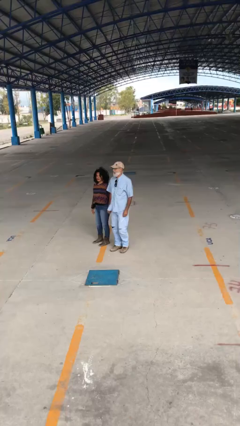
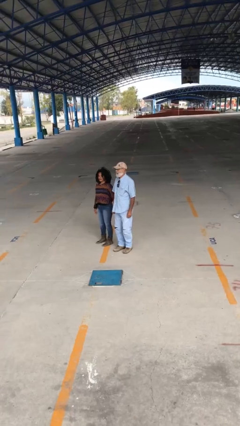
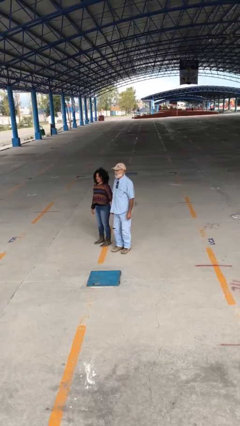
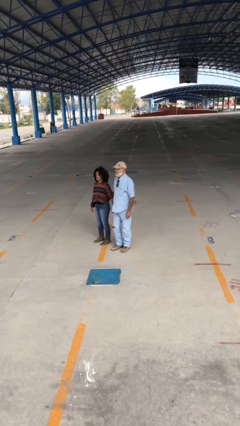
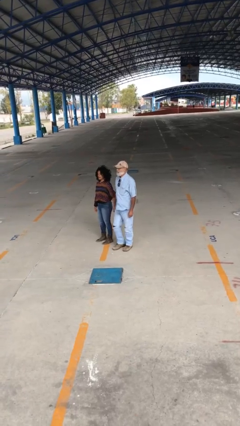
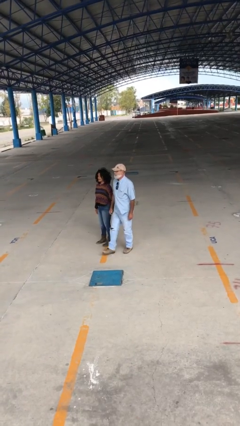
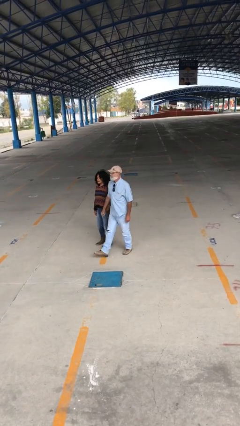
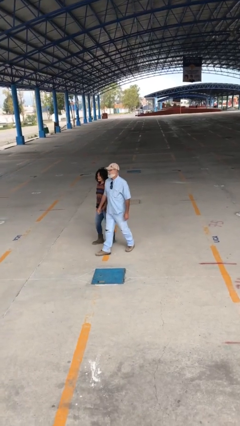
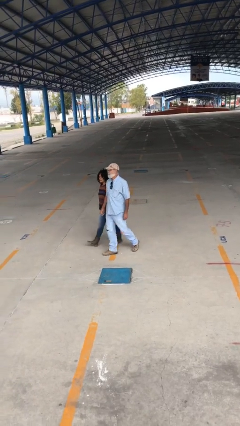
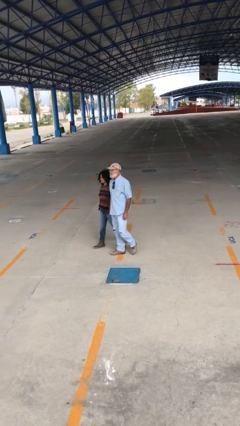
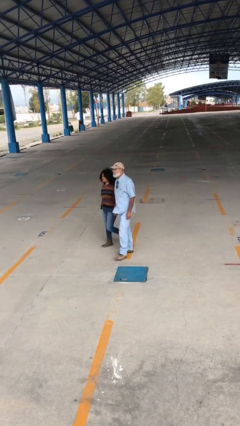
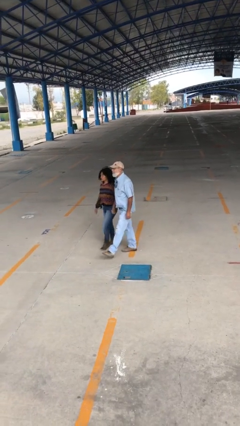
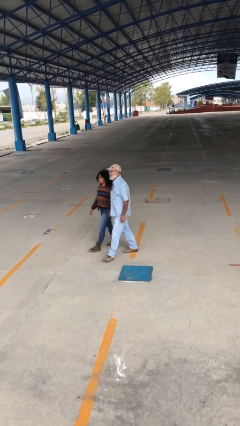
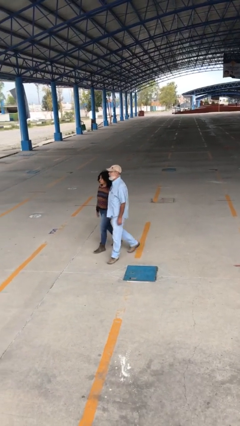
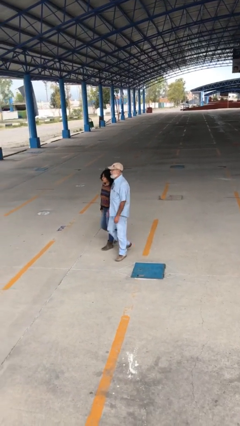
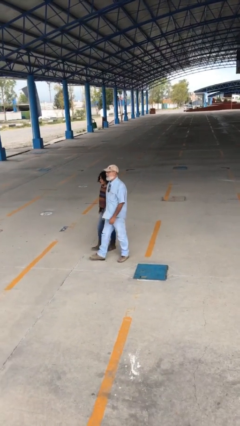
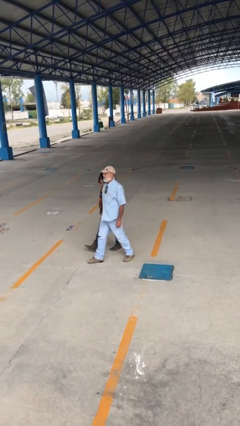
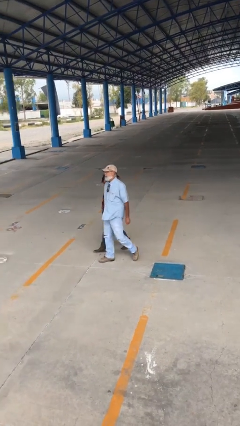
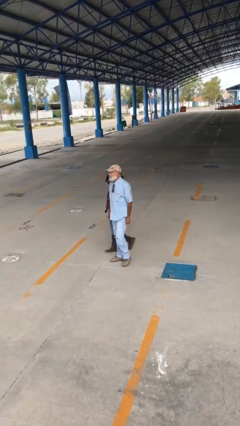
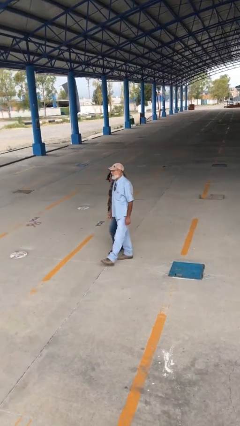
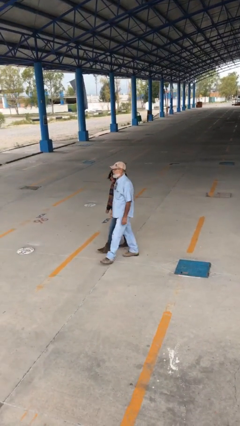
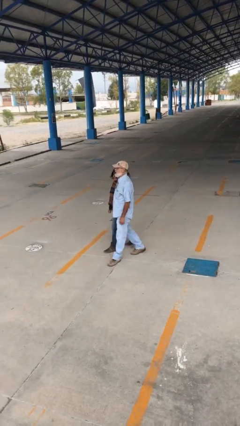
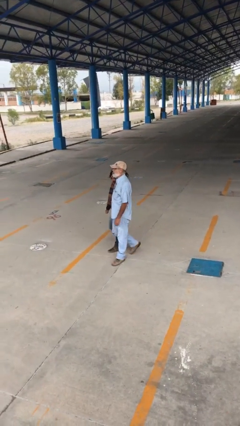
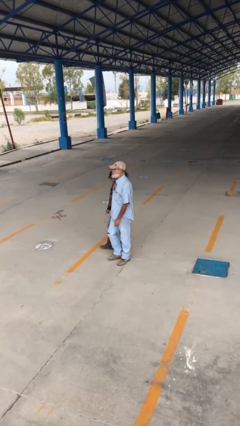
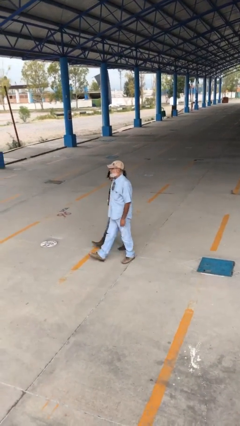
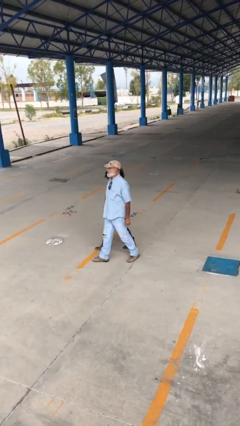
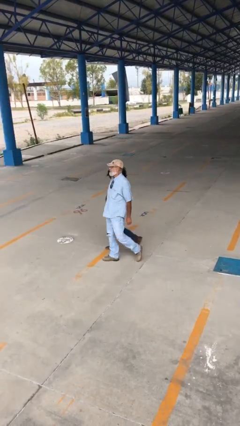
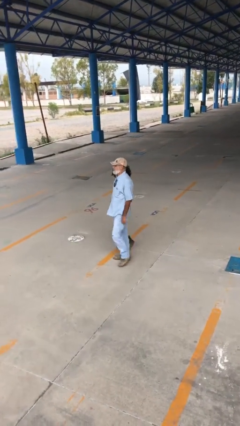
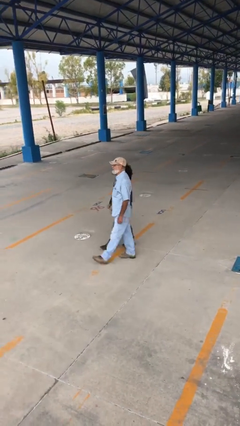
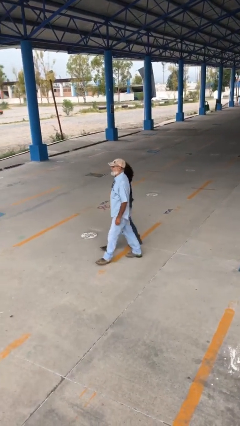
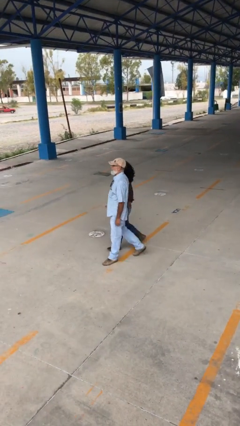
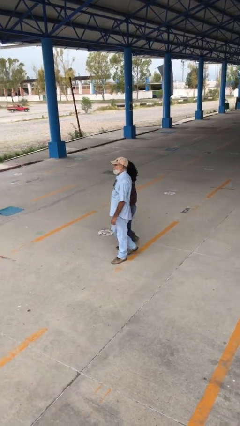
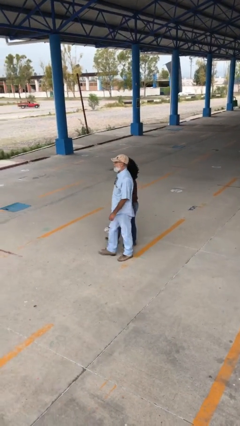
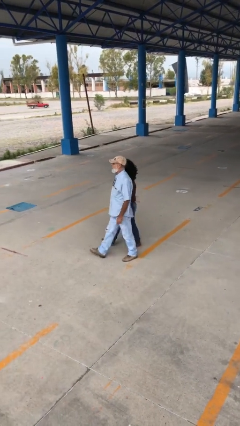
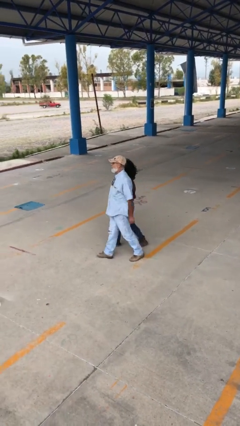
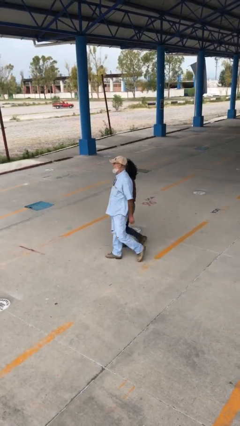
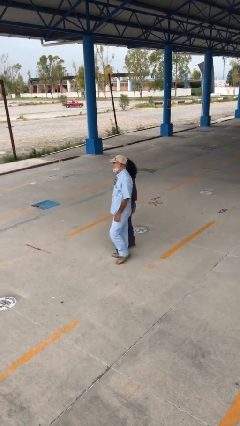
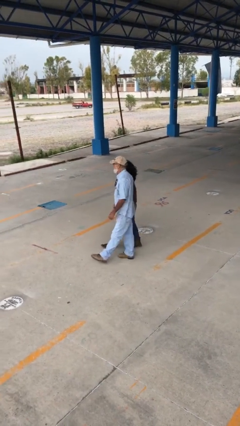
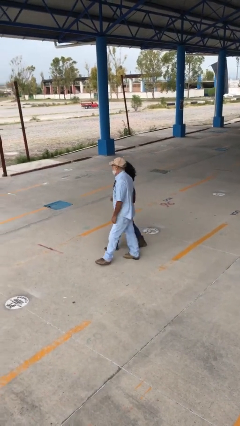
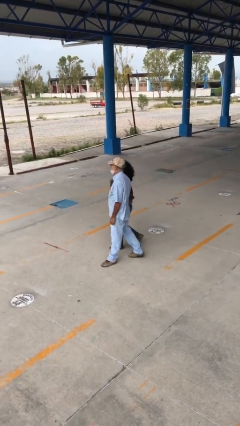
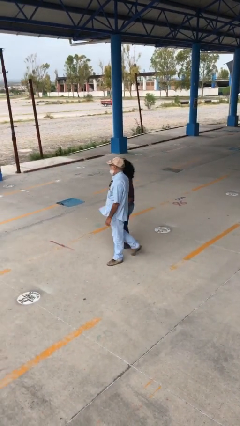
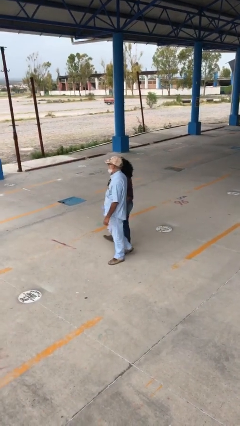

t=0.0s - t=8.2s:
person holds hand

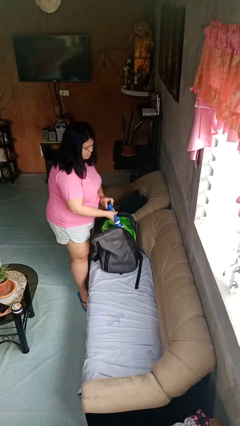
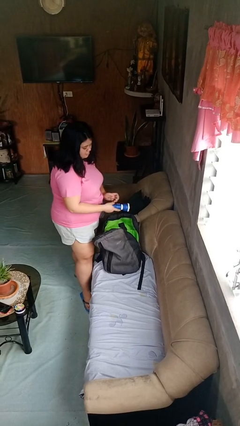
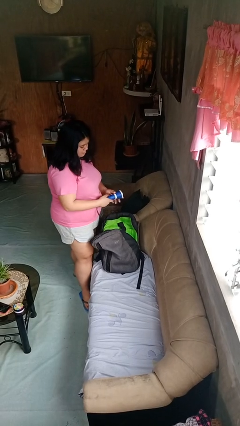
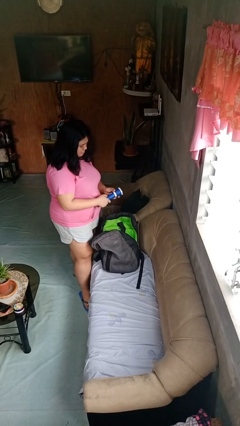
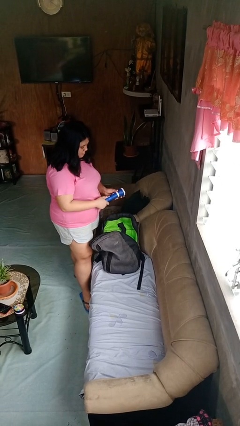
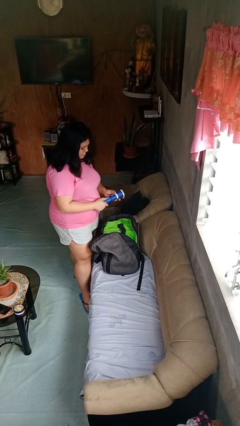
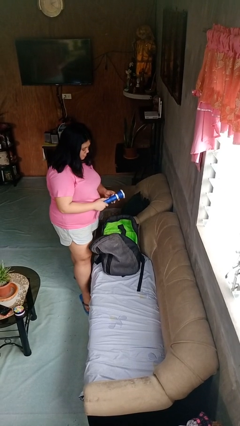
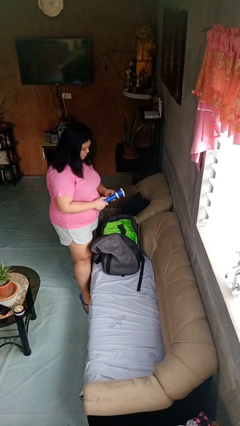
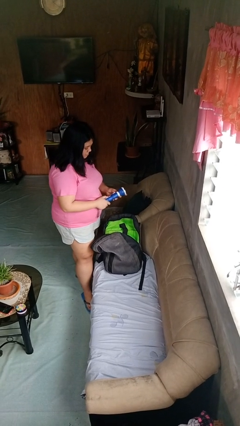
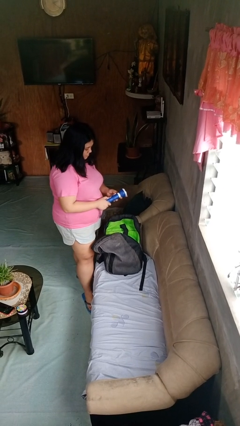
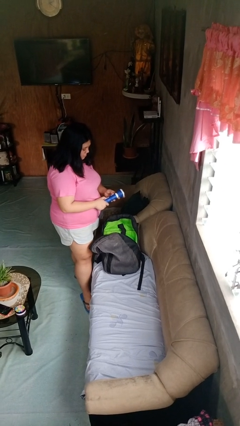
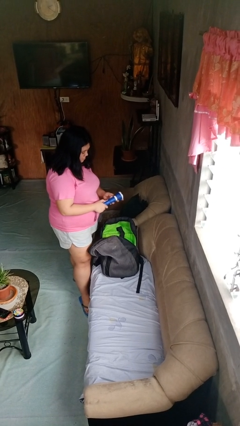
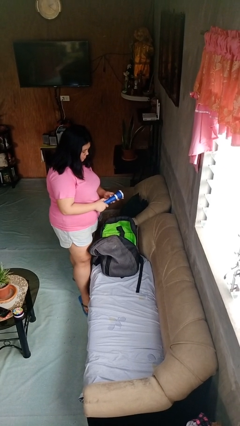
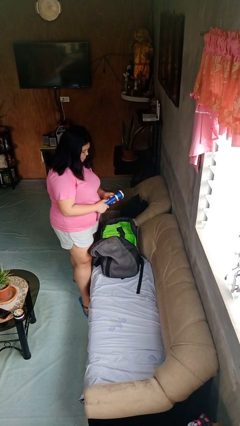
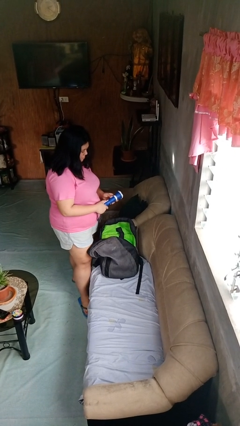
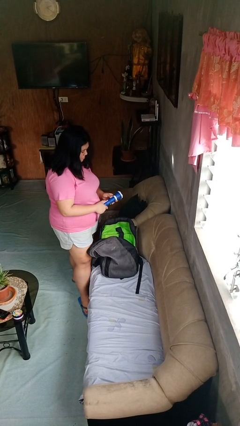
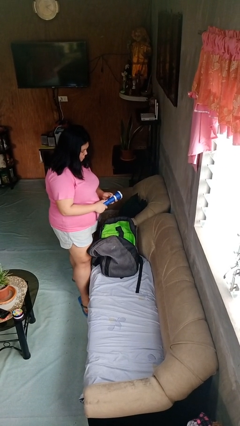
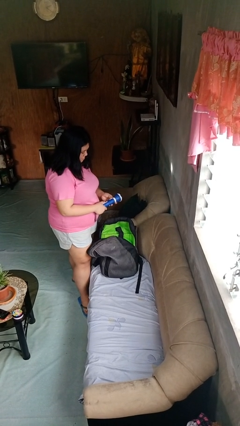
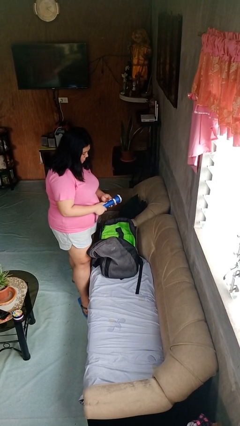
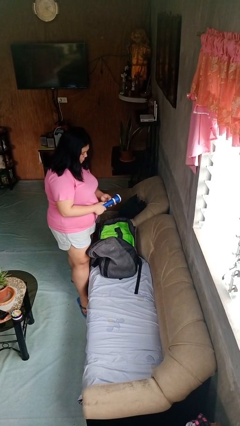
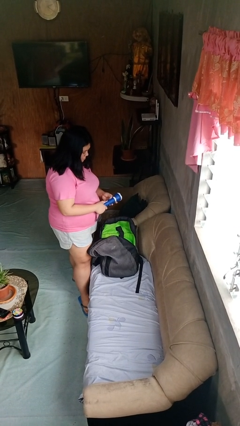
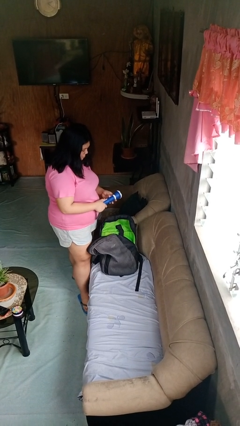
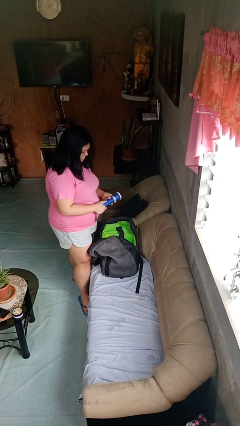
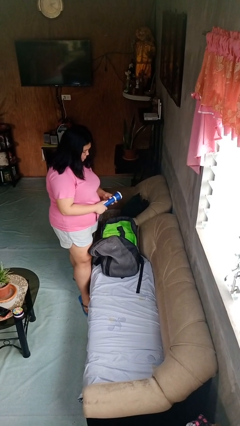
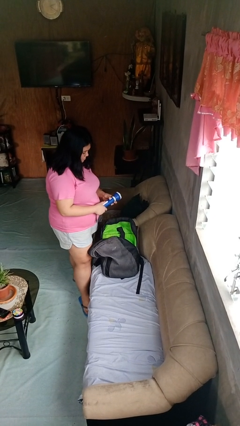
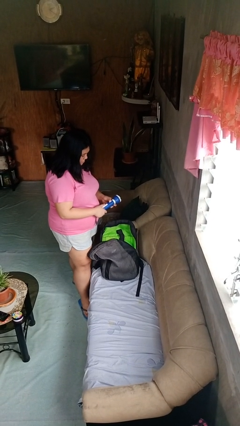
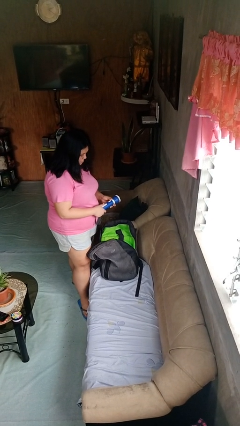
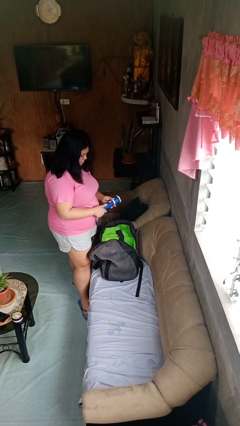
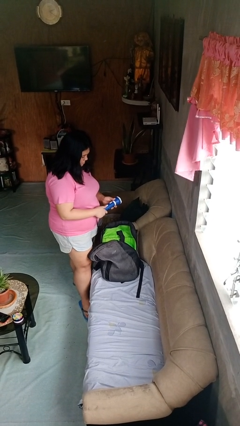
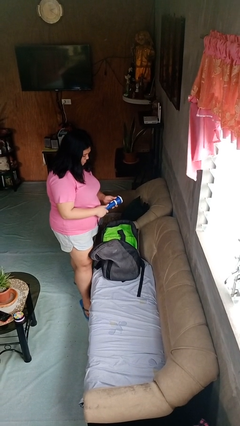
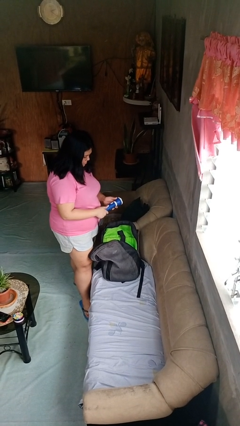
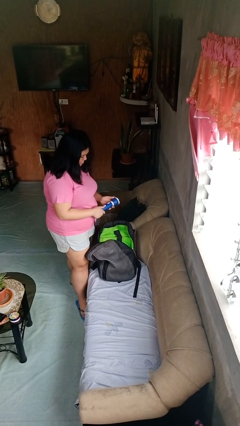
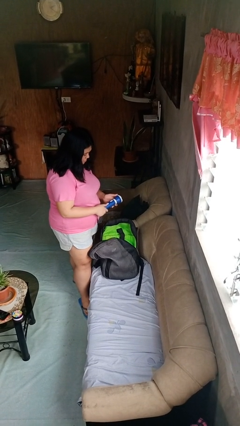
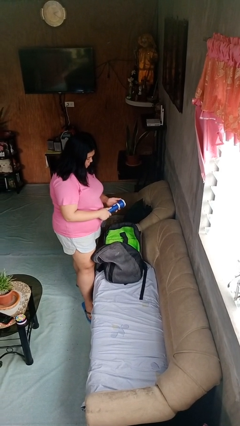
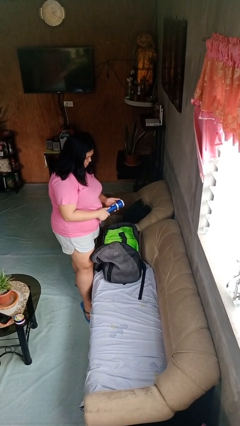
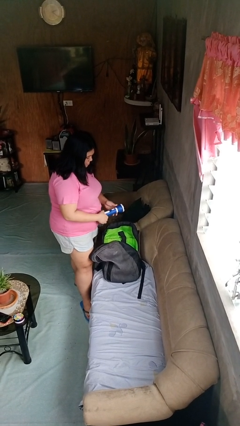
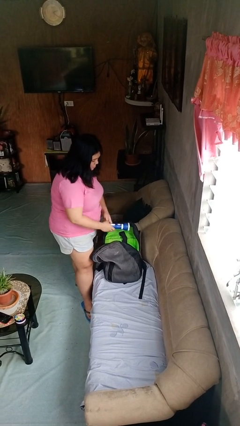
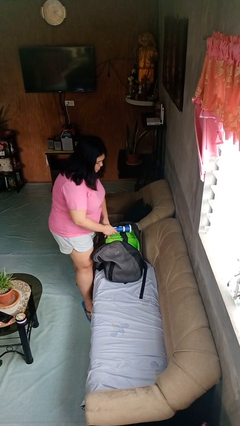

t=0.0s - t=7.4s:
person takes object from backpack

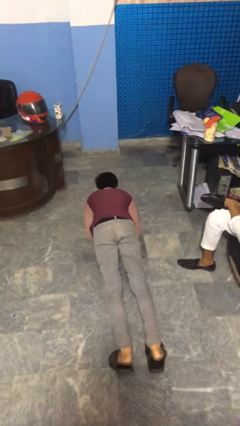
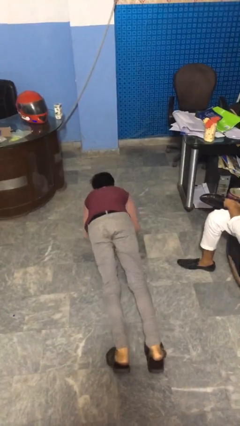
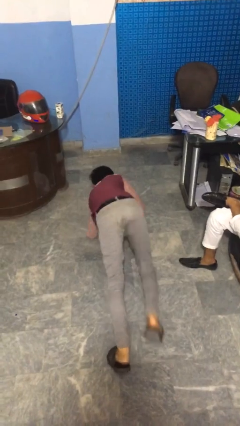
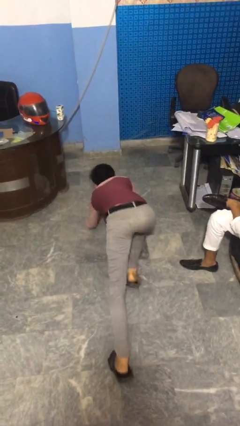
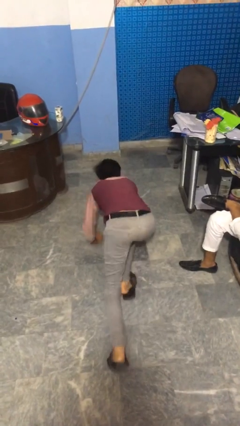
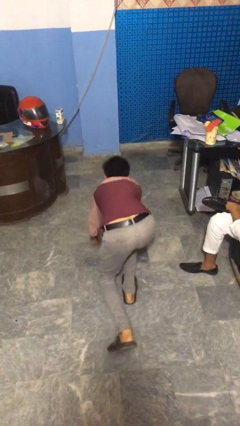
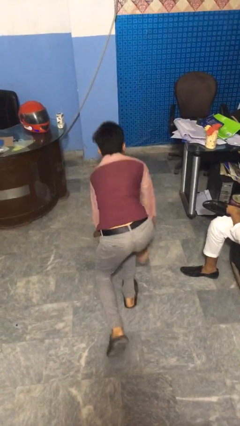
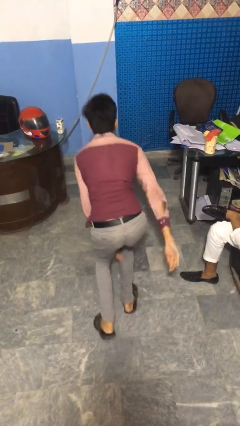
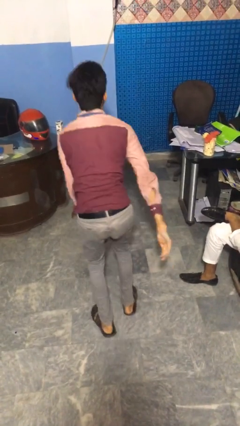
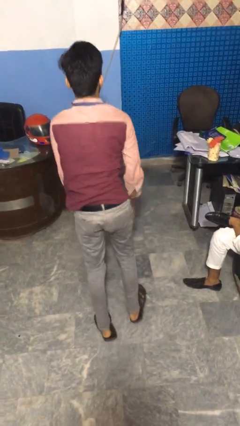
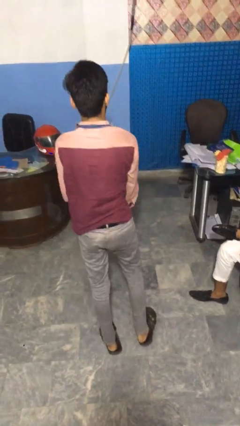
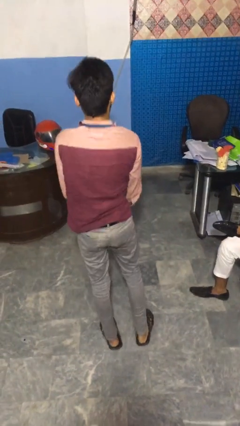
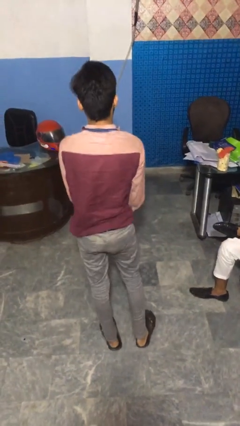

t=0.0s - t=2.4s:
person stands up from floor
